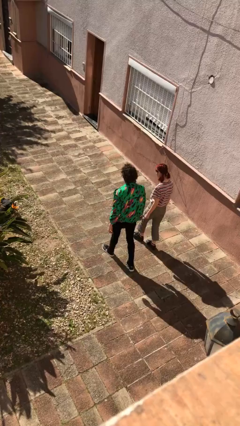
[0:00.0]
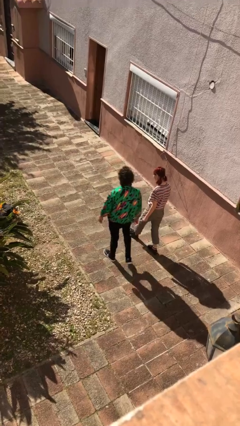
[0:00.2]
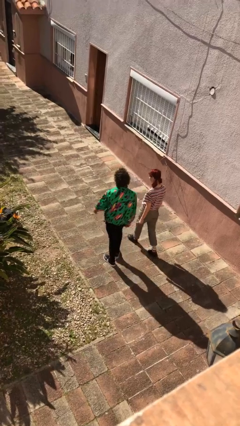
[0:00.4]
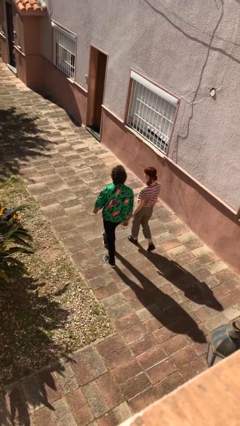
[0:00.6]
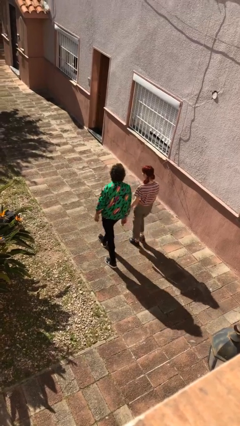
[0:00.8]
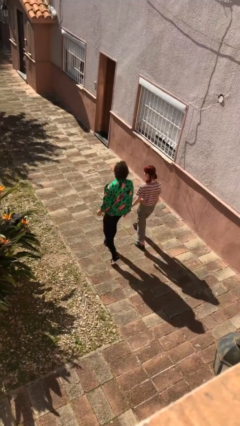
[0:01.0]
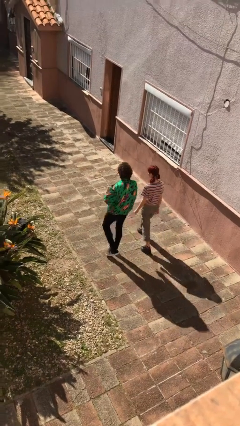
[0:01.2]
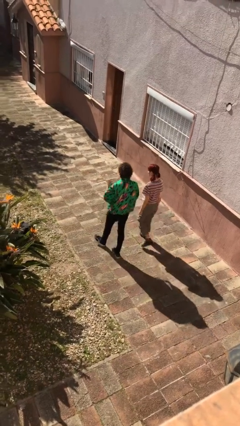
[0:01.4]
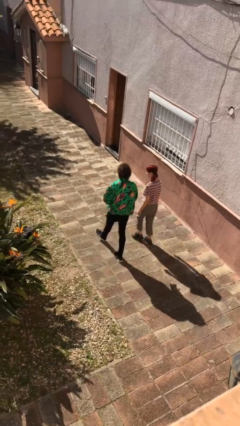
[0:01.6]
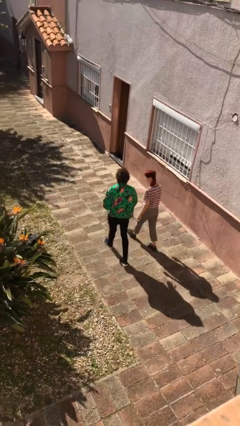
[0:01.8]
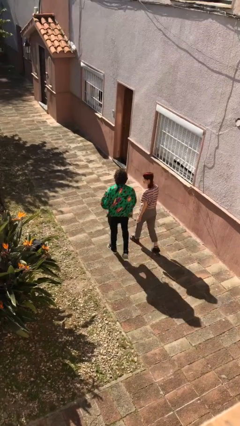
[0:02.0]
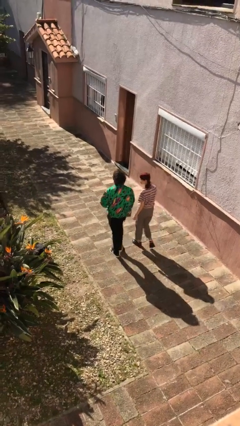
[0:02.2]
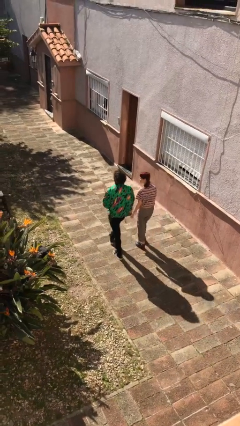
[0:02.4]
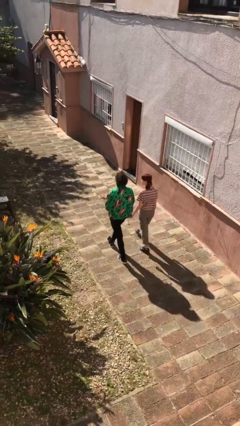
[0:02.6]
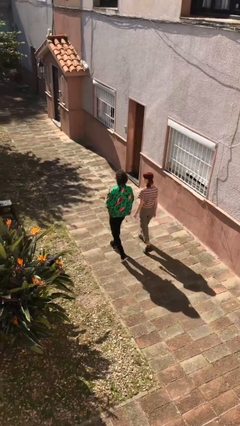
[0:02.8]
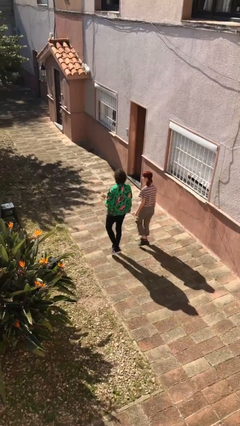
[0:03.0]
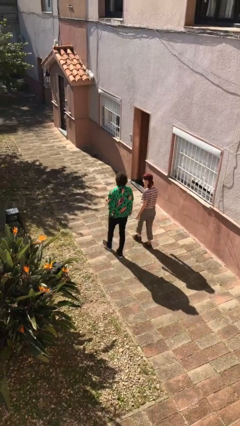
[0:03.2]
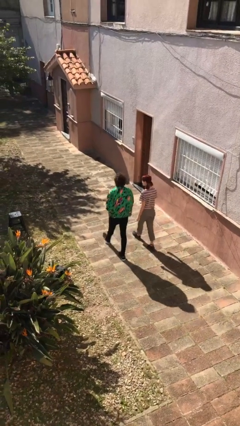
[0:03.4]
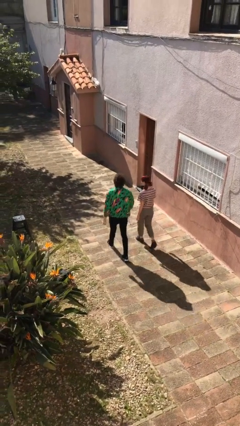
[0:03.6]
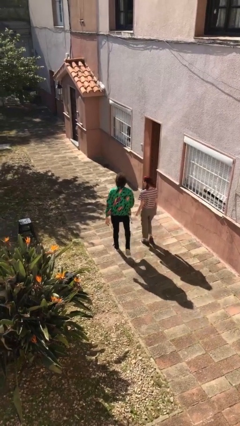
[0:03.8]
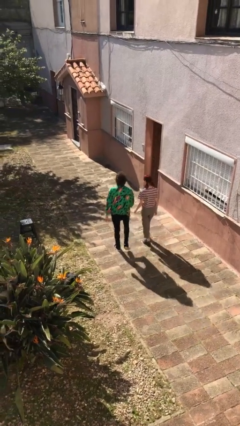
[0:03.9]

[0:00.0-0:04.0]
person talks to person

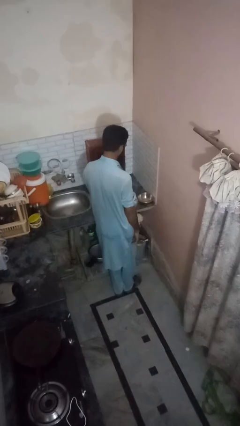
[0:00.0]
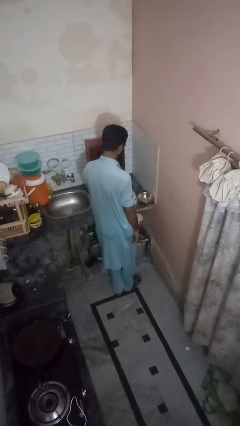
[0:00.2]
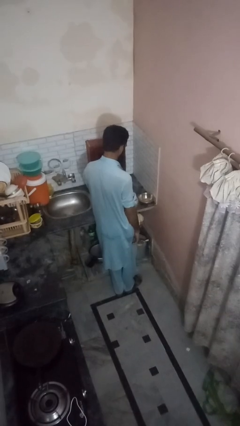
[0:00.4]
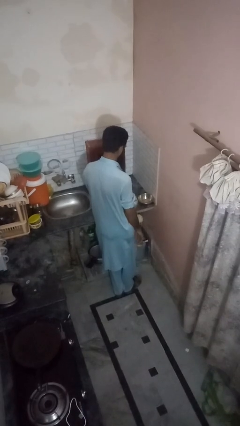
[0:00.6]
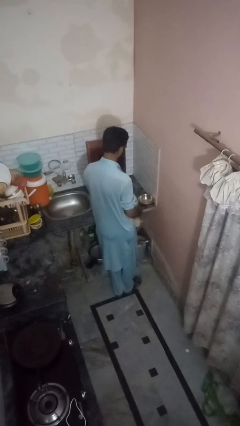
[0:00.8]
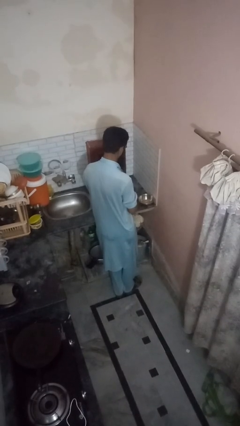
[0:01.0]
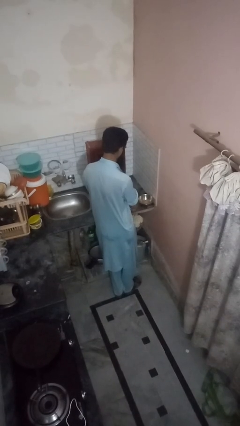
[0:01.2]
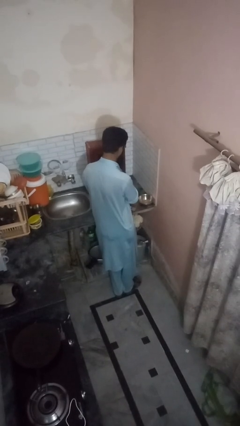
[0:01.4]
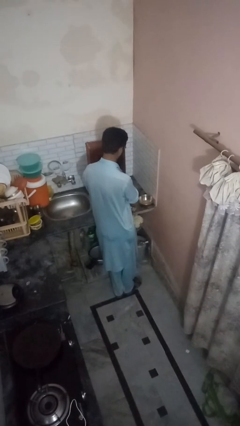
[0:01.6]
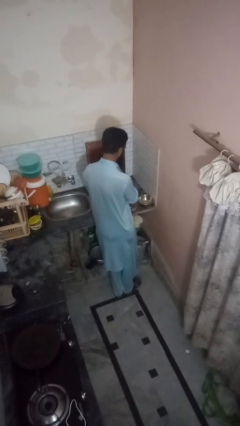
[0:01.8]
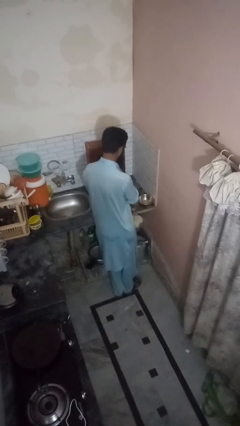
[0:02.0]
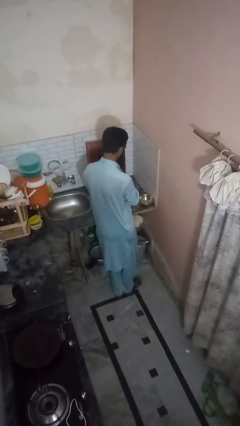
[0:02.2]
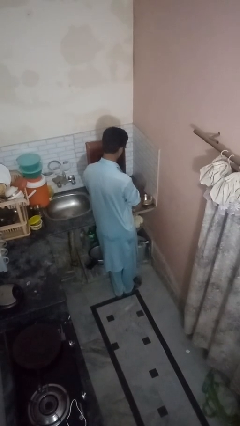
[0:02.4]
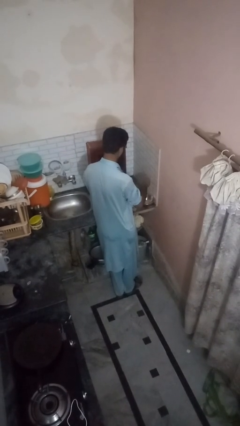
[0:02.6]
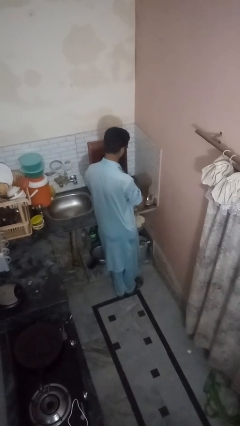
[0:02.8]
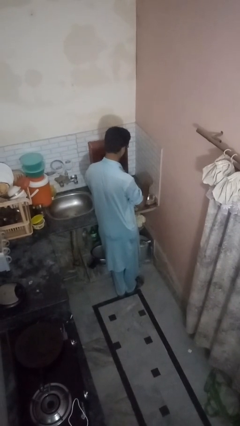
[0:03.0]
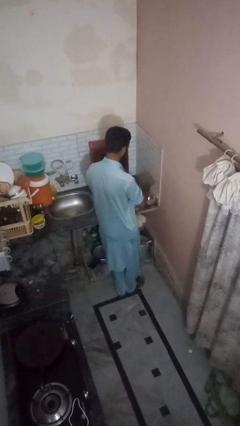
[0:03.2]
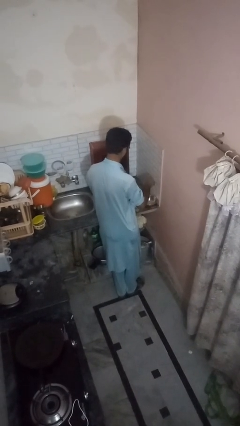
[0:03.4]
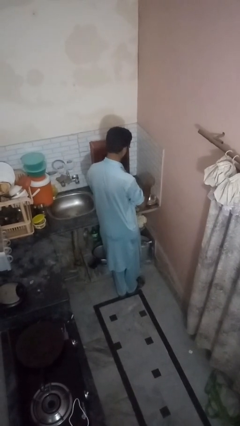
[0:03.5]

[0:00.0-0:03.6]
person pours into bowl

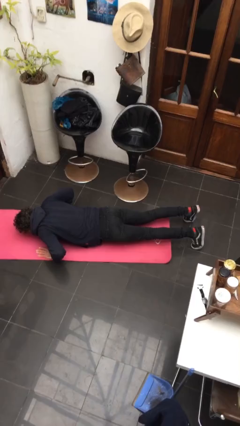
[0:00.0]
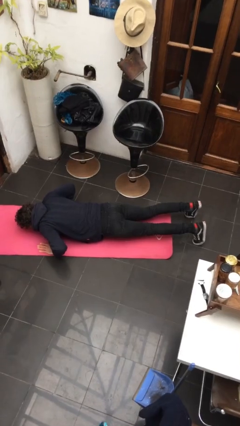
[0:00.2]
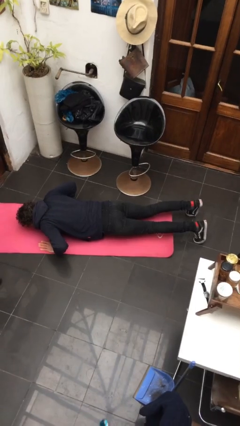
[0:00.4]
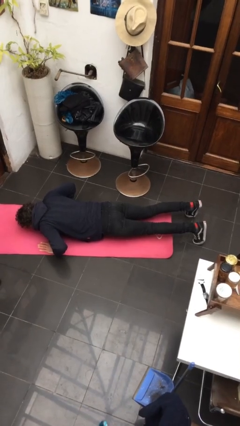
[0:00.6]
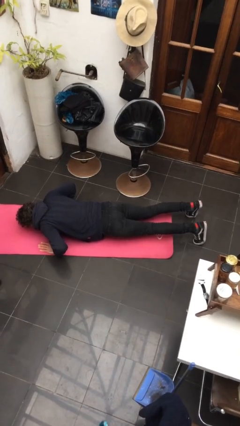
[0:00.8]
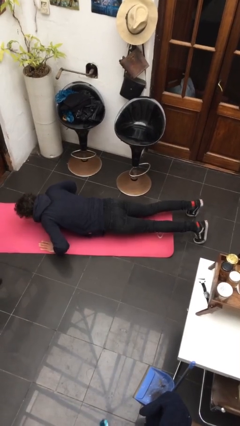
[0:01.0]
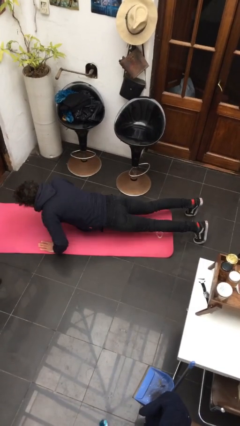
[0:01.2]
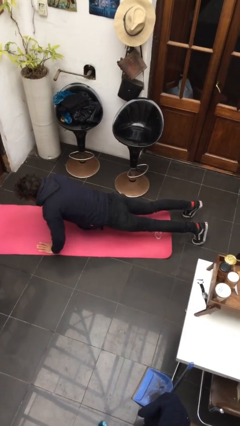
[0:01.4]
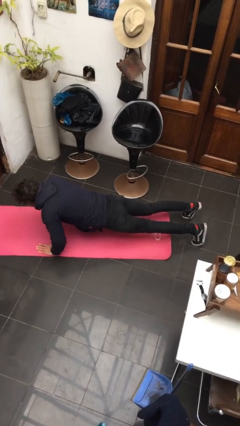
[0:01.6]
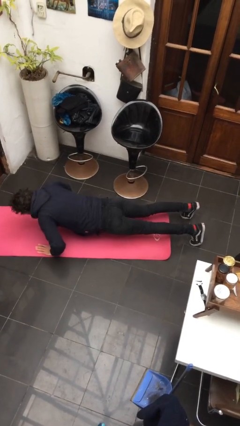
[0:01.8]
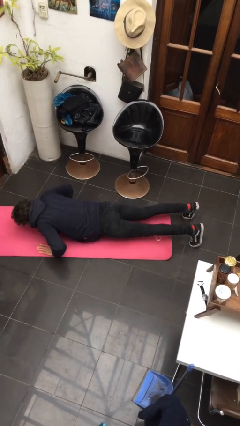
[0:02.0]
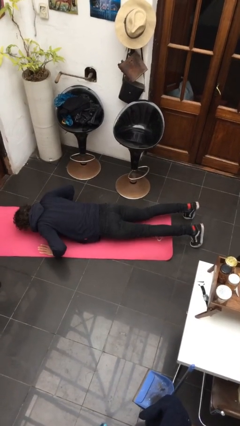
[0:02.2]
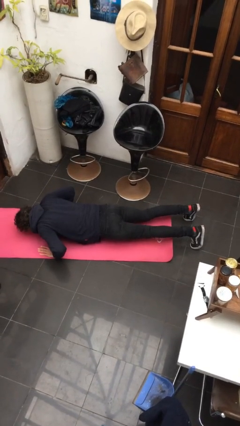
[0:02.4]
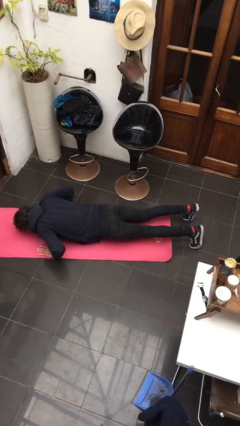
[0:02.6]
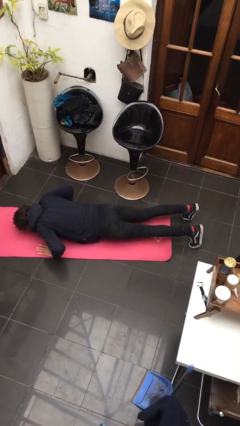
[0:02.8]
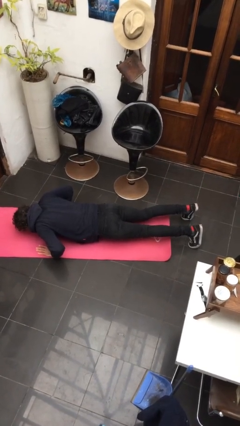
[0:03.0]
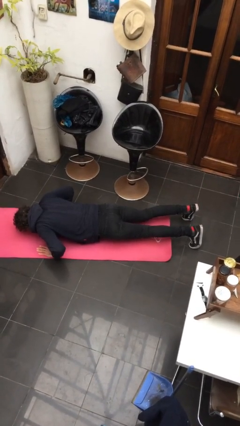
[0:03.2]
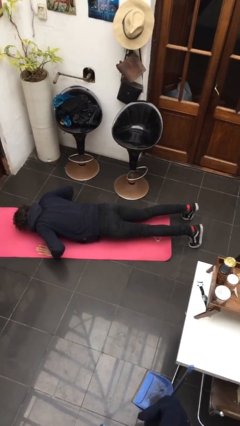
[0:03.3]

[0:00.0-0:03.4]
person exercises with pushup

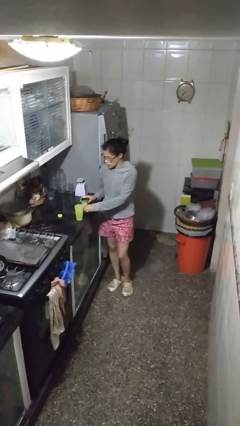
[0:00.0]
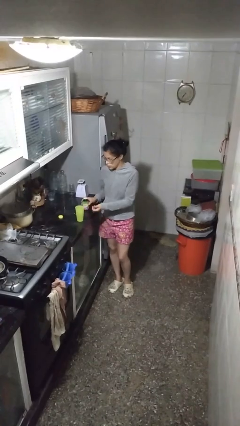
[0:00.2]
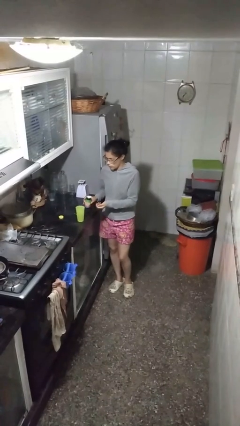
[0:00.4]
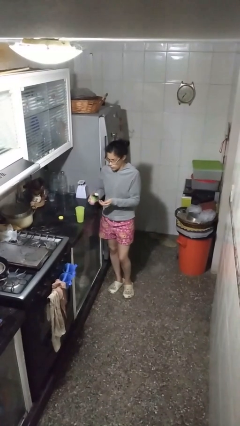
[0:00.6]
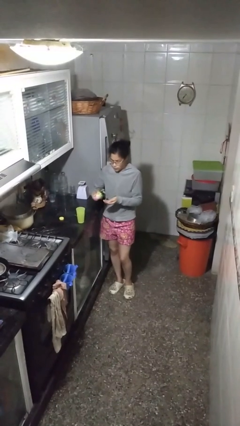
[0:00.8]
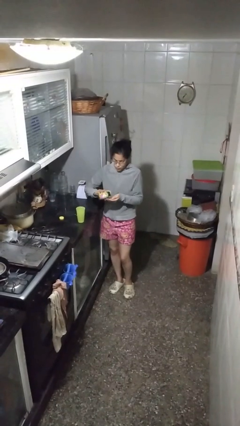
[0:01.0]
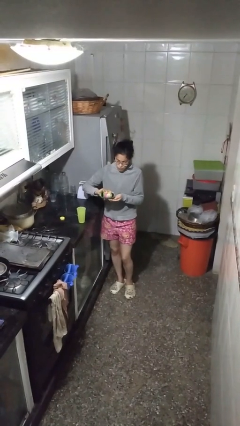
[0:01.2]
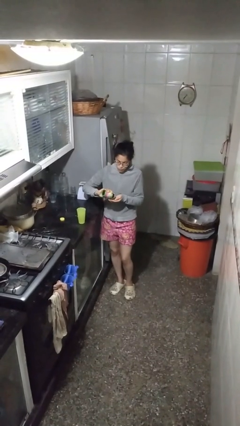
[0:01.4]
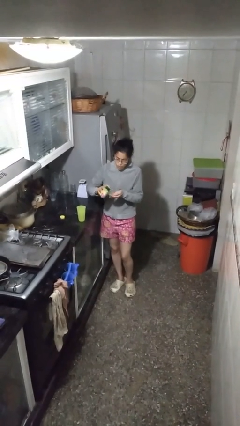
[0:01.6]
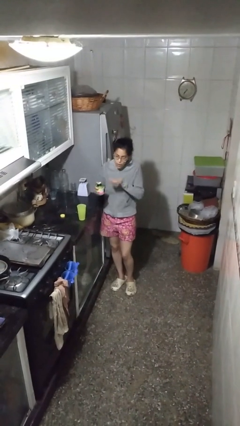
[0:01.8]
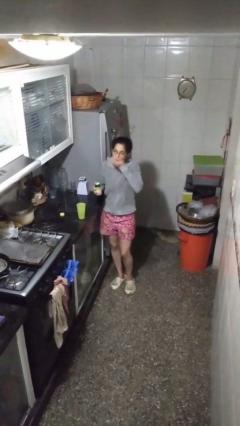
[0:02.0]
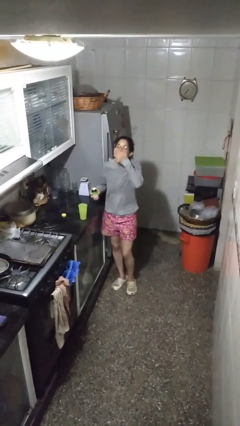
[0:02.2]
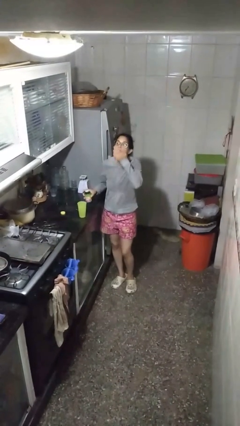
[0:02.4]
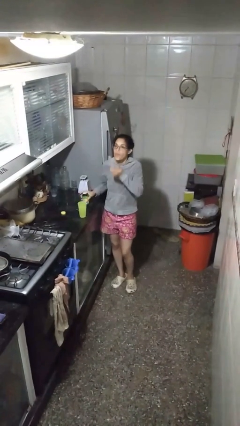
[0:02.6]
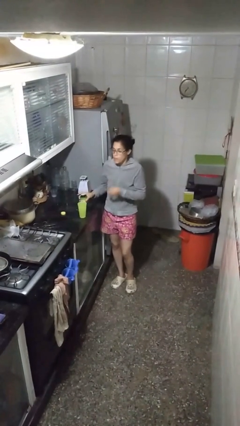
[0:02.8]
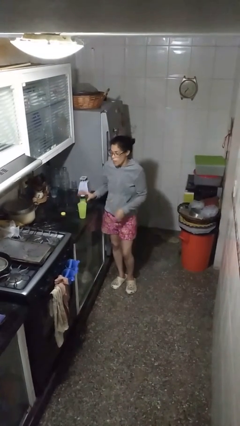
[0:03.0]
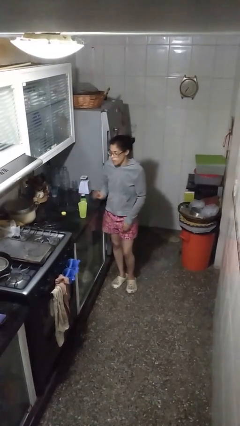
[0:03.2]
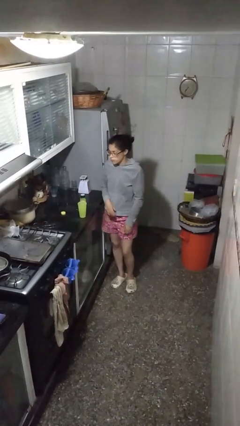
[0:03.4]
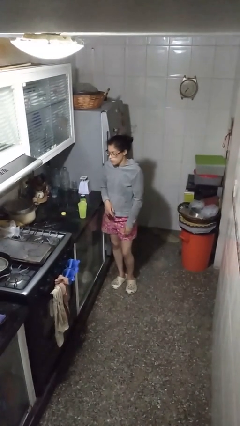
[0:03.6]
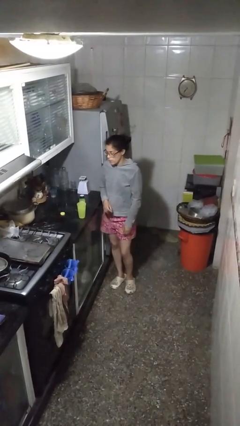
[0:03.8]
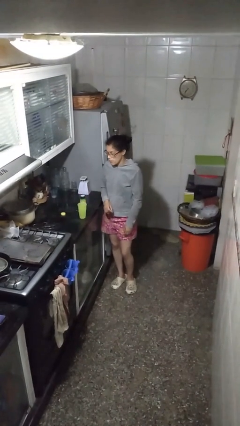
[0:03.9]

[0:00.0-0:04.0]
person takes medicine pills

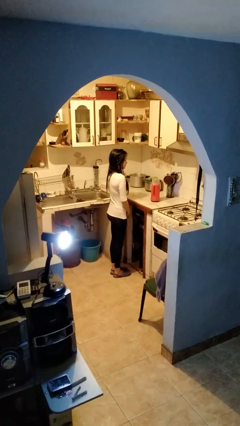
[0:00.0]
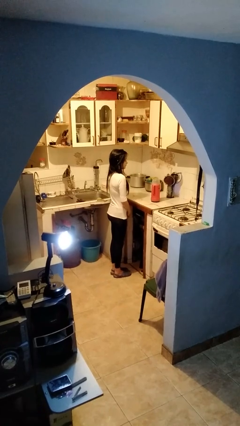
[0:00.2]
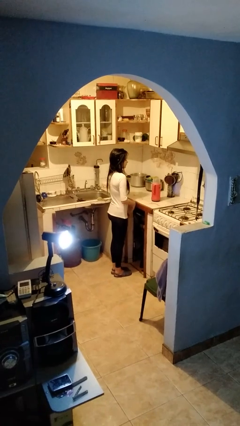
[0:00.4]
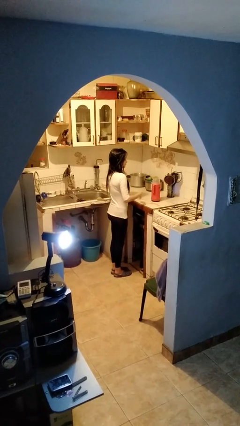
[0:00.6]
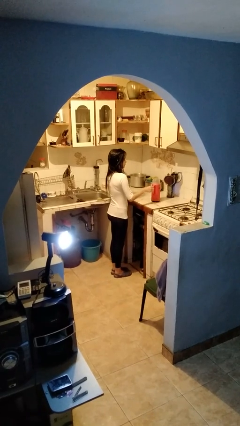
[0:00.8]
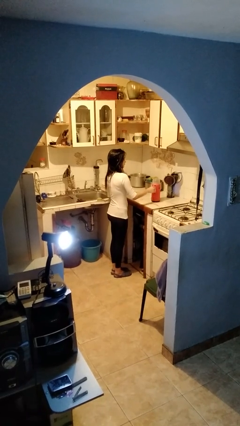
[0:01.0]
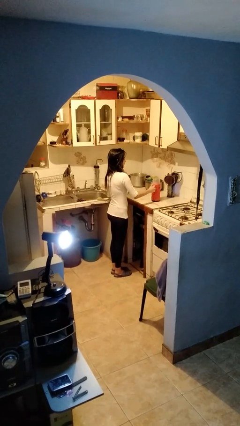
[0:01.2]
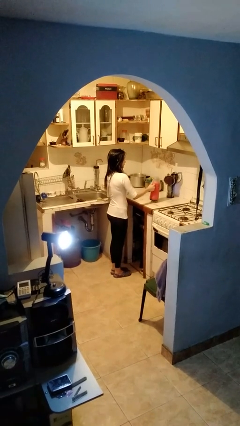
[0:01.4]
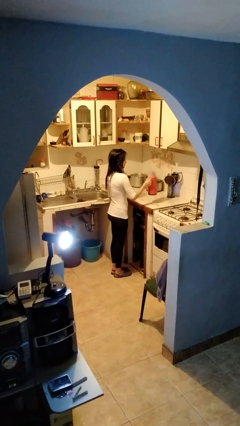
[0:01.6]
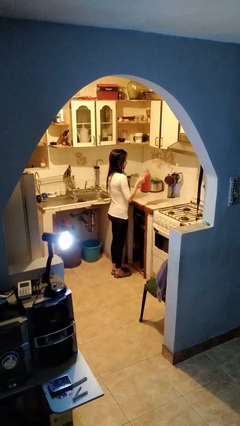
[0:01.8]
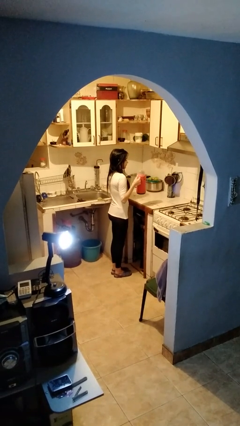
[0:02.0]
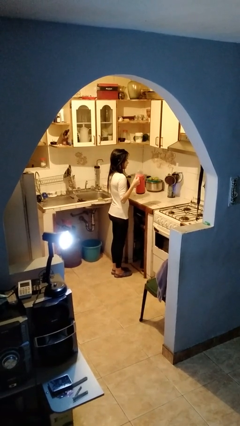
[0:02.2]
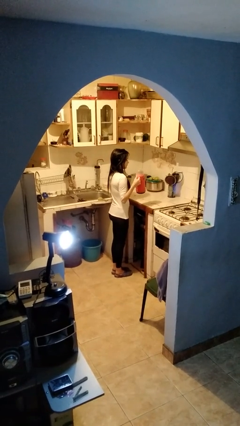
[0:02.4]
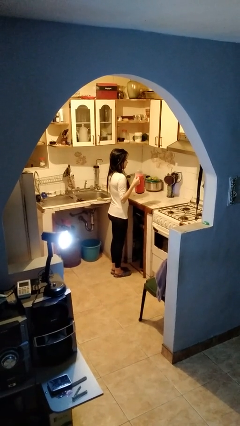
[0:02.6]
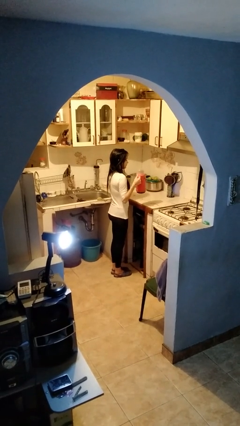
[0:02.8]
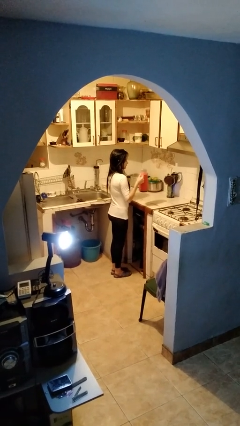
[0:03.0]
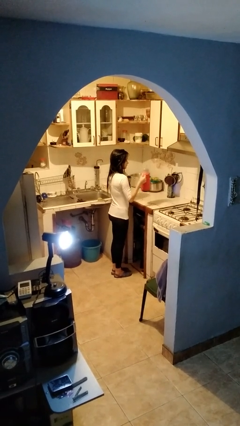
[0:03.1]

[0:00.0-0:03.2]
person picks up object from countertop
